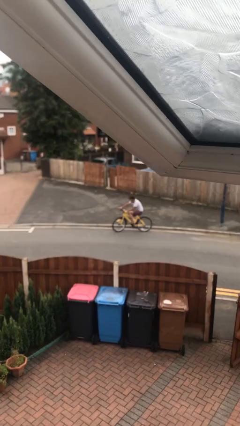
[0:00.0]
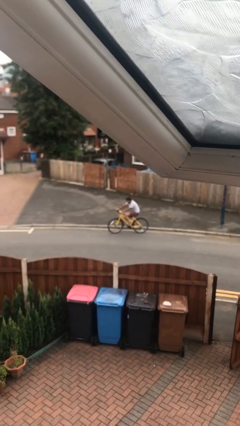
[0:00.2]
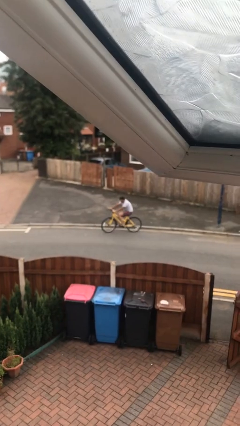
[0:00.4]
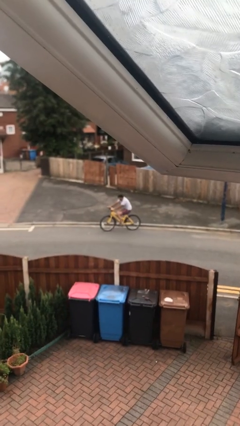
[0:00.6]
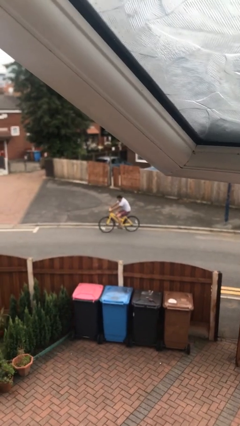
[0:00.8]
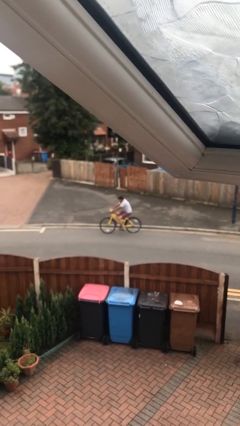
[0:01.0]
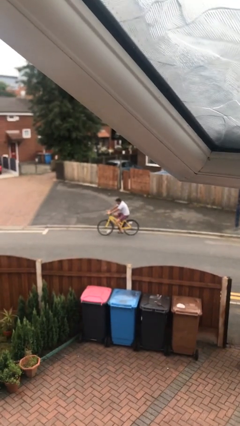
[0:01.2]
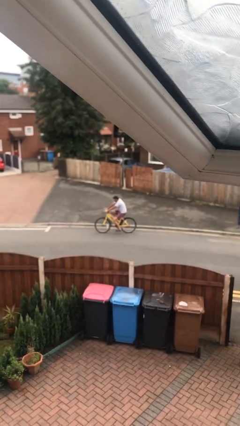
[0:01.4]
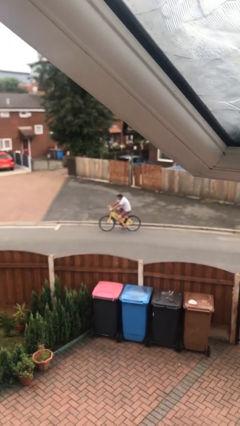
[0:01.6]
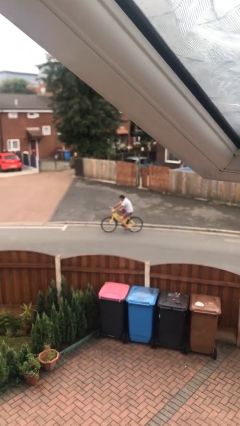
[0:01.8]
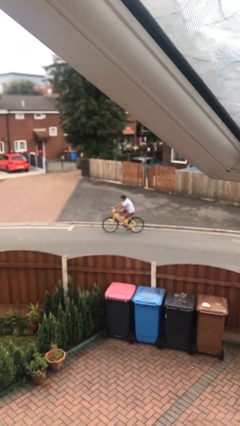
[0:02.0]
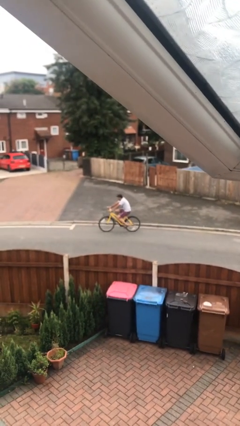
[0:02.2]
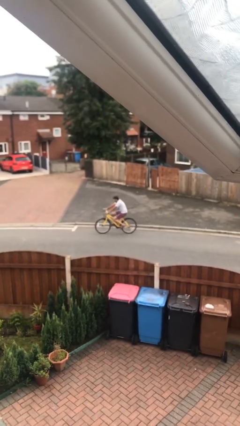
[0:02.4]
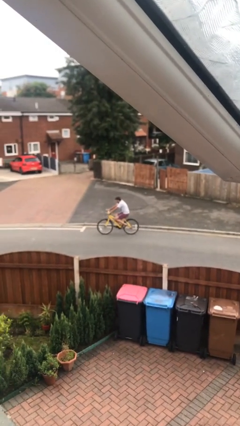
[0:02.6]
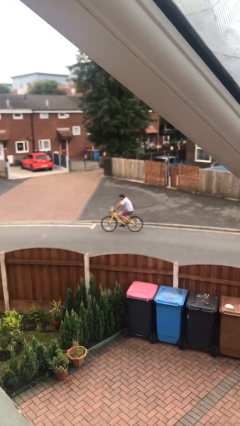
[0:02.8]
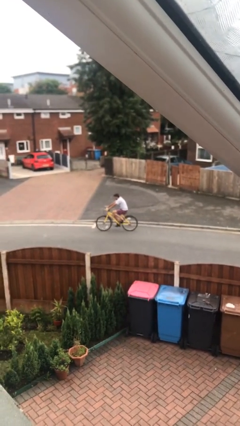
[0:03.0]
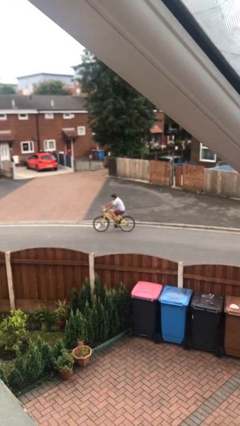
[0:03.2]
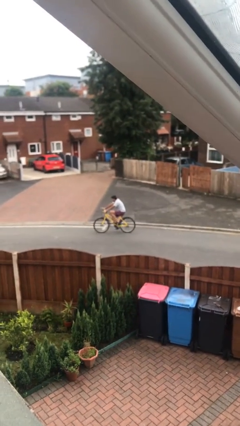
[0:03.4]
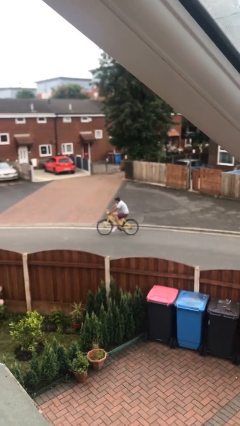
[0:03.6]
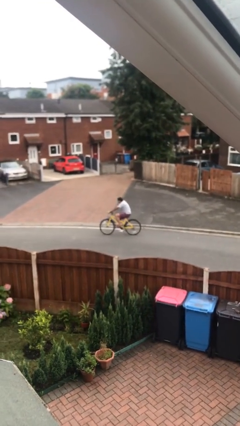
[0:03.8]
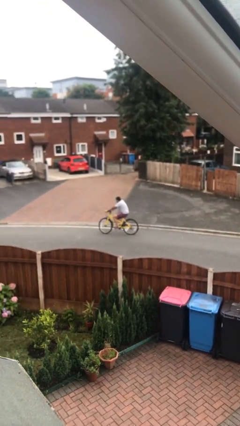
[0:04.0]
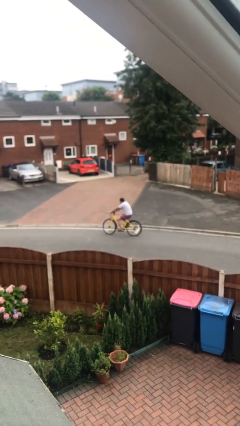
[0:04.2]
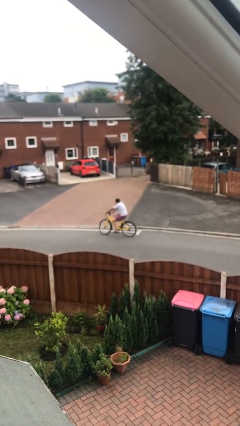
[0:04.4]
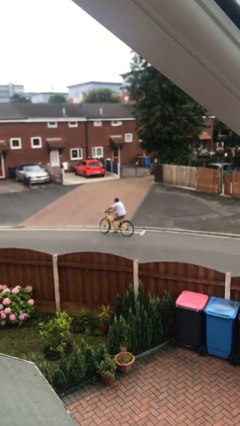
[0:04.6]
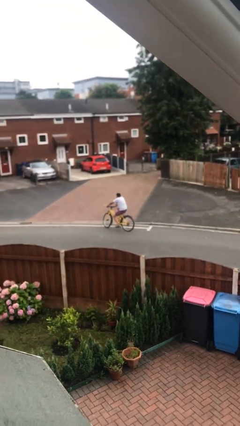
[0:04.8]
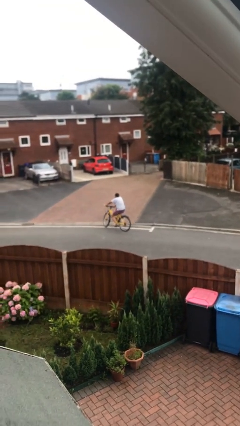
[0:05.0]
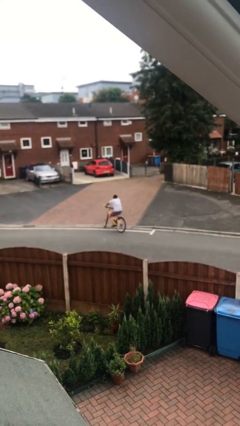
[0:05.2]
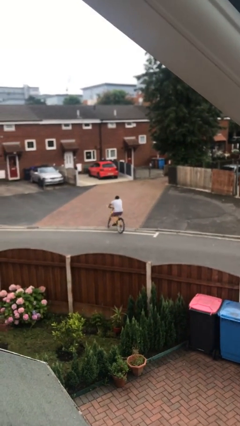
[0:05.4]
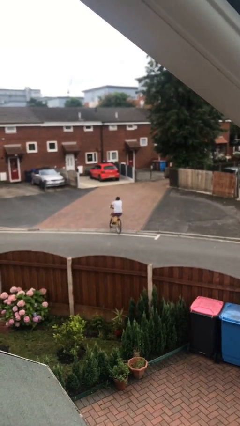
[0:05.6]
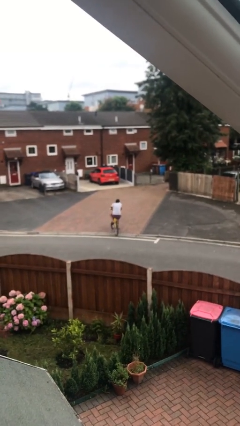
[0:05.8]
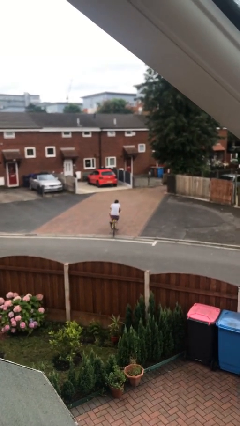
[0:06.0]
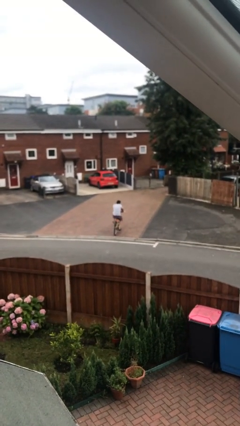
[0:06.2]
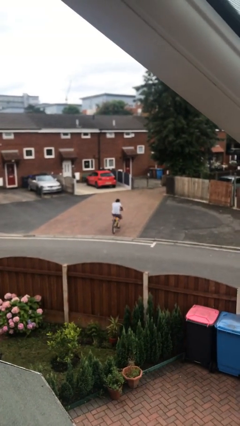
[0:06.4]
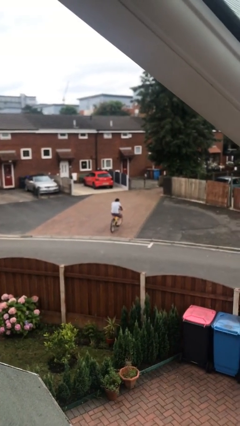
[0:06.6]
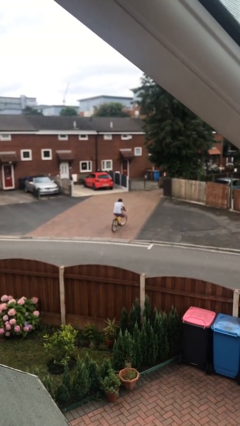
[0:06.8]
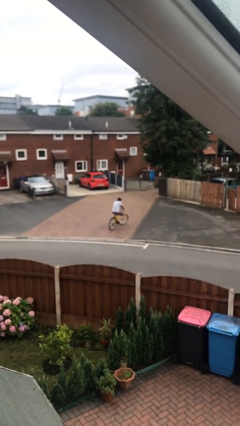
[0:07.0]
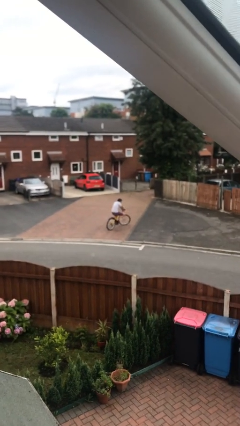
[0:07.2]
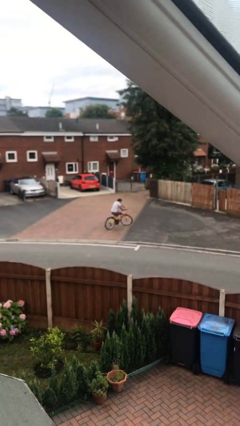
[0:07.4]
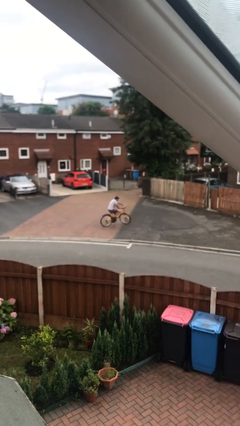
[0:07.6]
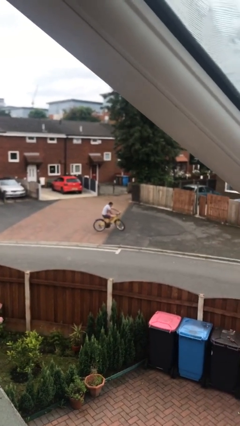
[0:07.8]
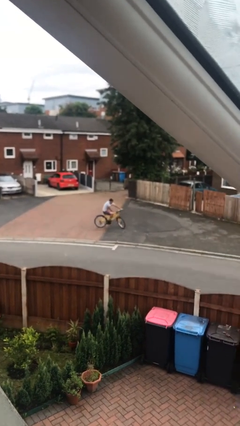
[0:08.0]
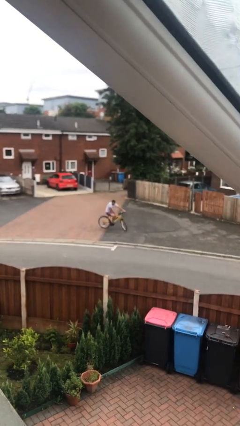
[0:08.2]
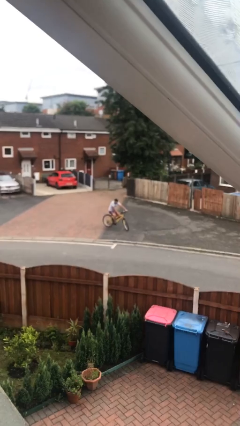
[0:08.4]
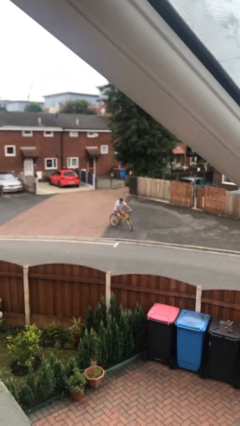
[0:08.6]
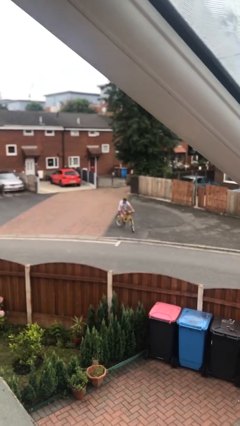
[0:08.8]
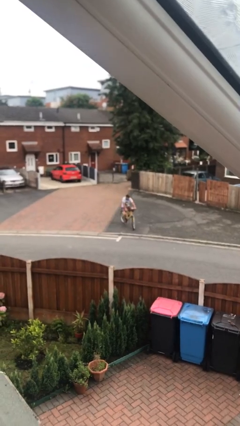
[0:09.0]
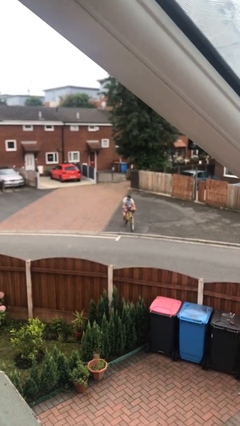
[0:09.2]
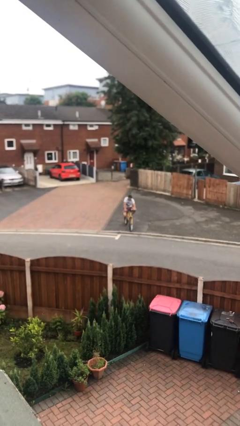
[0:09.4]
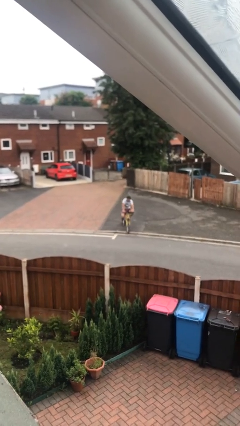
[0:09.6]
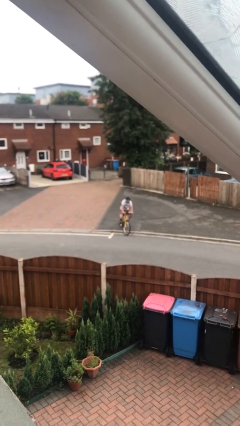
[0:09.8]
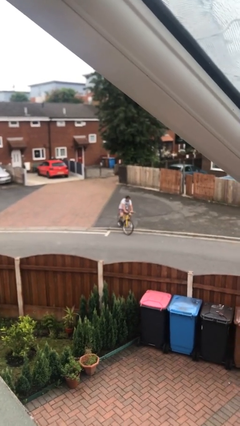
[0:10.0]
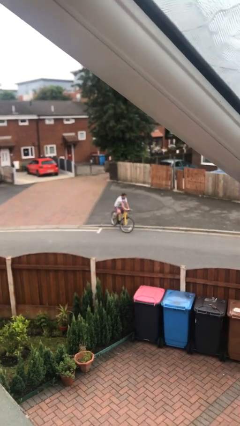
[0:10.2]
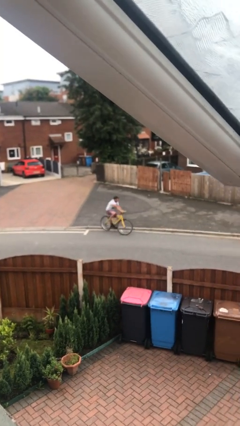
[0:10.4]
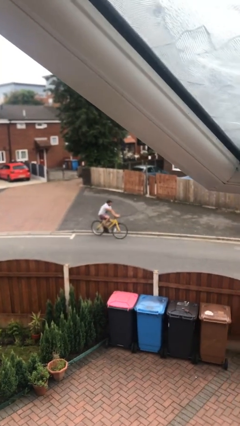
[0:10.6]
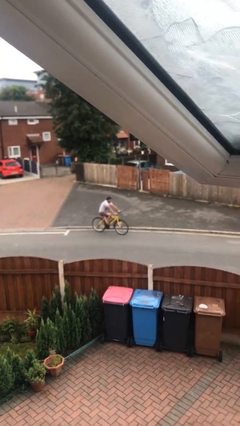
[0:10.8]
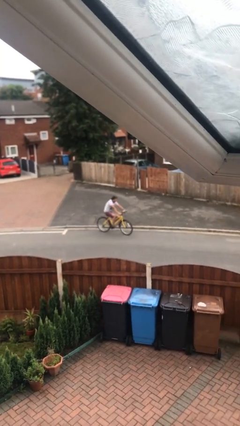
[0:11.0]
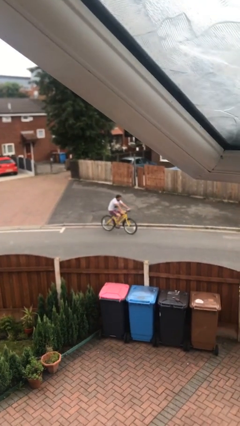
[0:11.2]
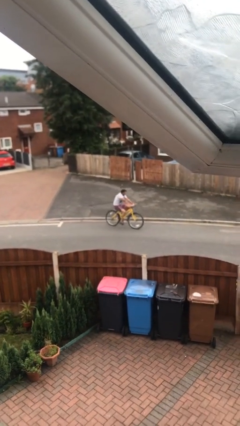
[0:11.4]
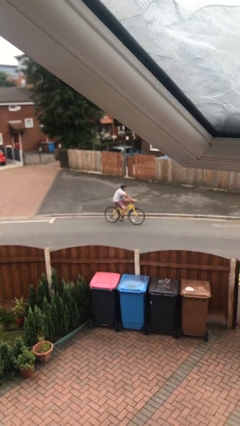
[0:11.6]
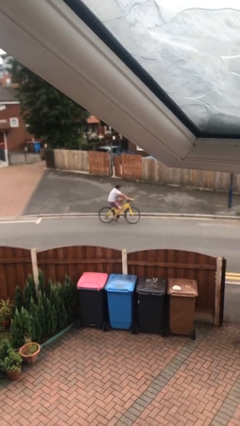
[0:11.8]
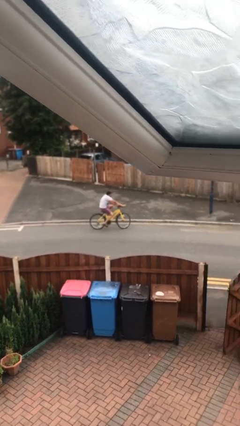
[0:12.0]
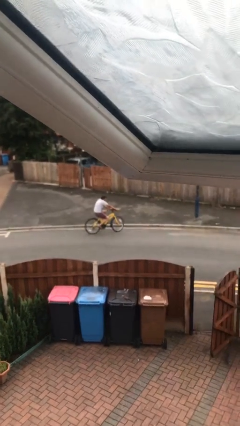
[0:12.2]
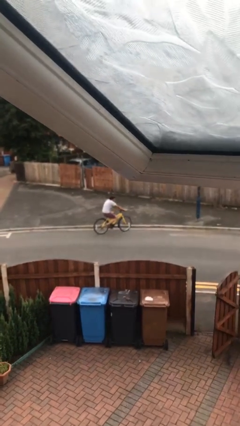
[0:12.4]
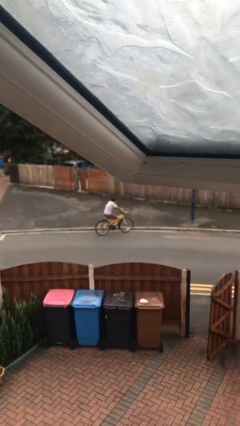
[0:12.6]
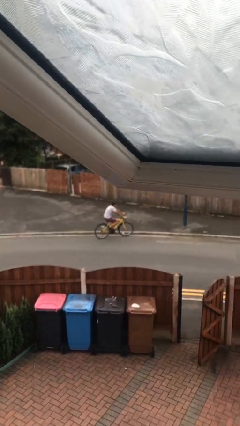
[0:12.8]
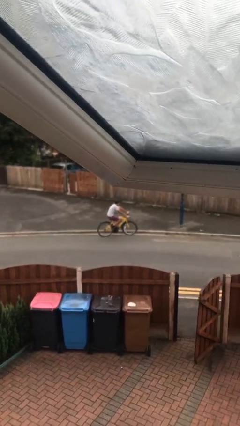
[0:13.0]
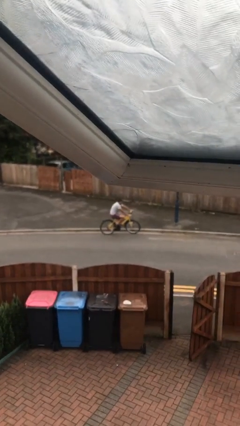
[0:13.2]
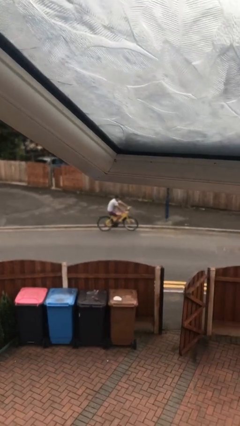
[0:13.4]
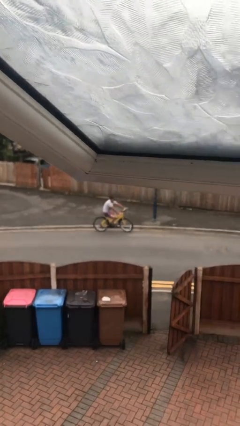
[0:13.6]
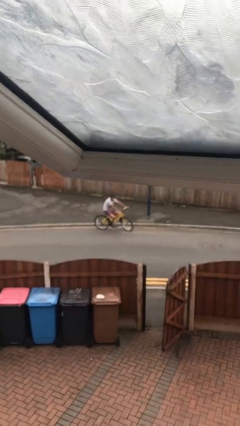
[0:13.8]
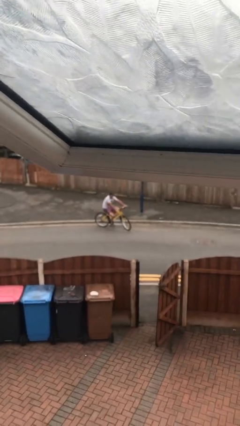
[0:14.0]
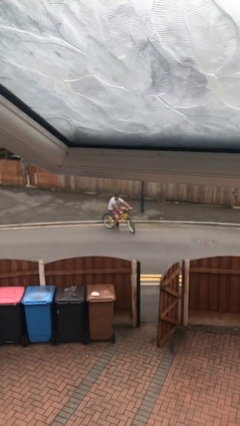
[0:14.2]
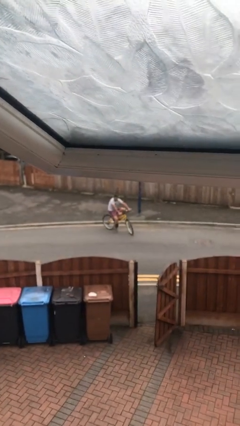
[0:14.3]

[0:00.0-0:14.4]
person rides bicycle

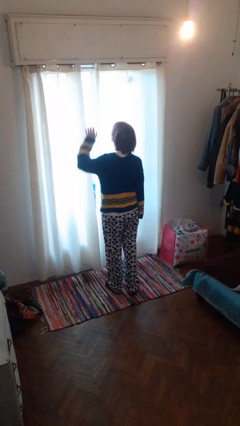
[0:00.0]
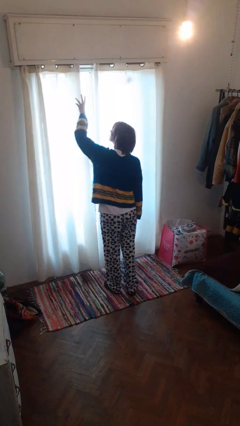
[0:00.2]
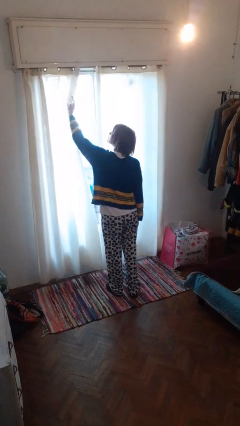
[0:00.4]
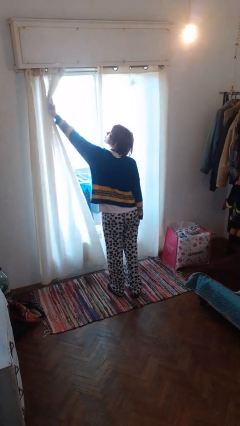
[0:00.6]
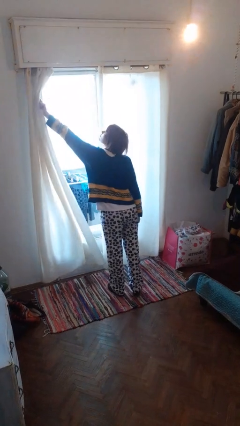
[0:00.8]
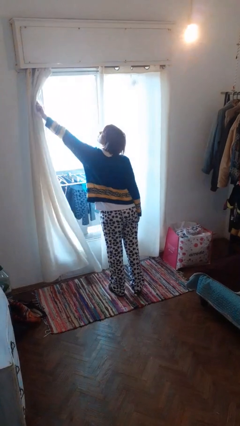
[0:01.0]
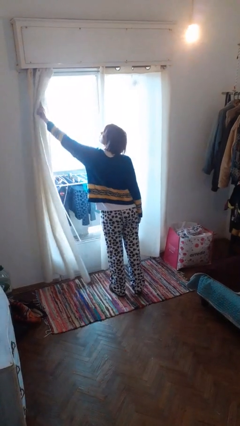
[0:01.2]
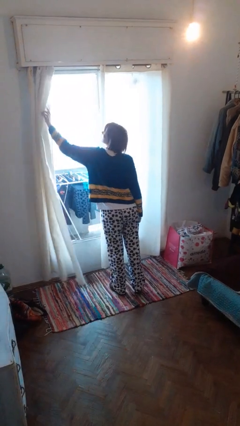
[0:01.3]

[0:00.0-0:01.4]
person opens curtains

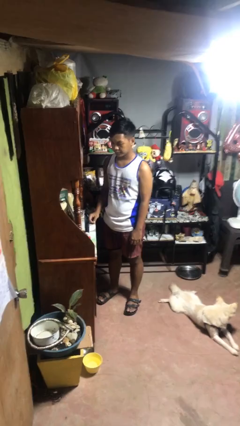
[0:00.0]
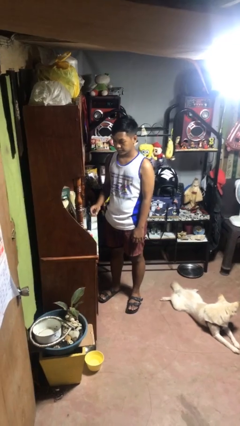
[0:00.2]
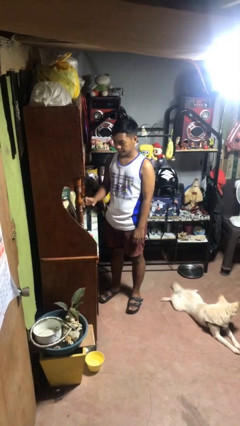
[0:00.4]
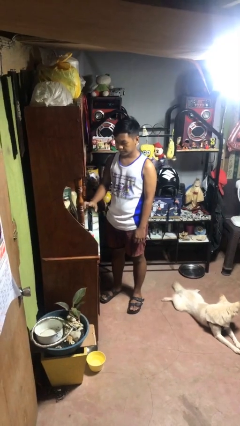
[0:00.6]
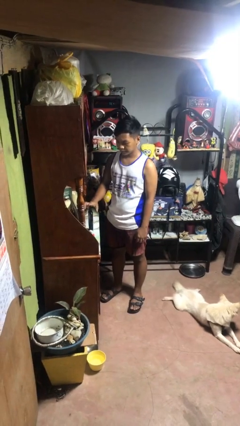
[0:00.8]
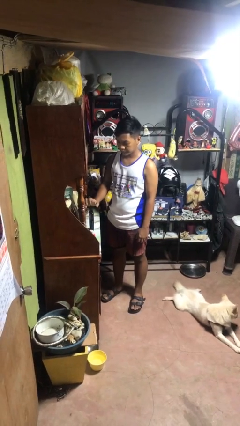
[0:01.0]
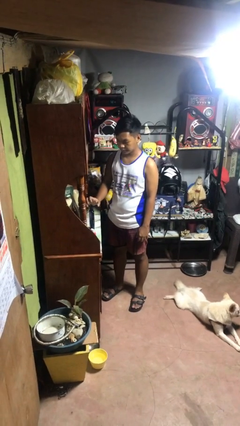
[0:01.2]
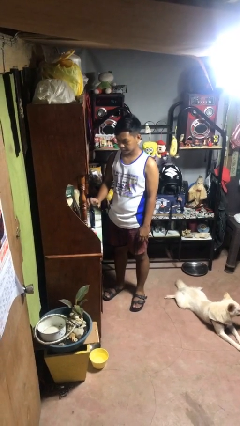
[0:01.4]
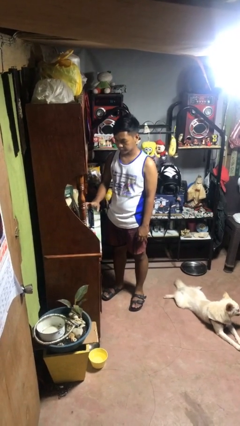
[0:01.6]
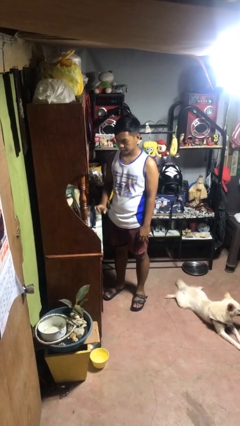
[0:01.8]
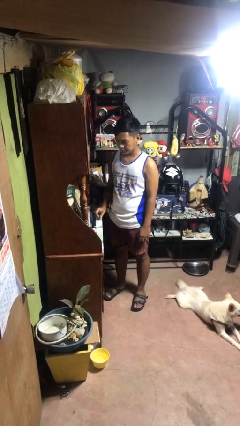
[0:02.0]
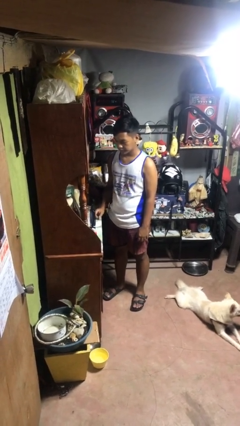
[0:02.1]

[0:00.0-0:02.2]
person taps object with finger

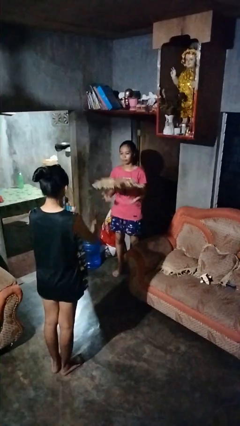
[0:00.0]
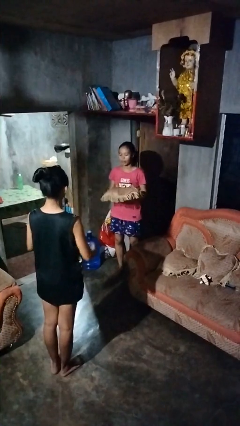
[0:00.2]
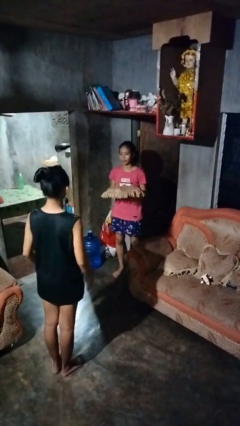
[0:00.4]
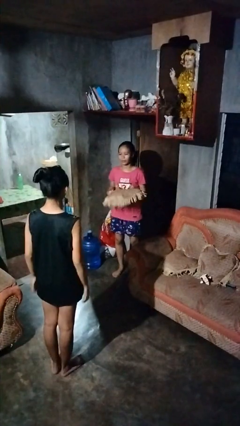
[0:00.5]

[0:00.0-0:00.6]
person catches object from person
